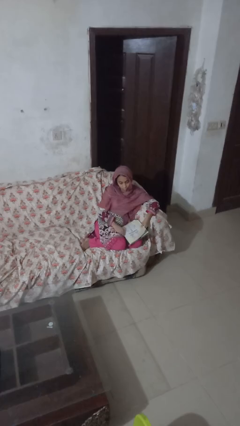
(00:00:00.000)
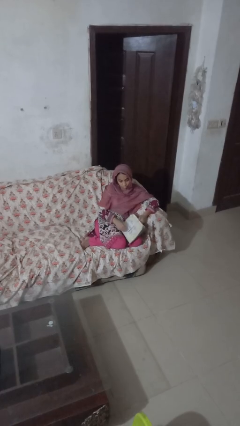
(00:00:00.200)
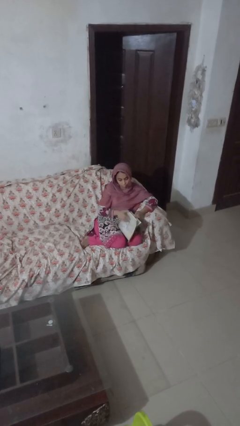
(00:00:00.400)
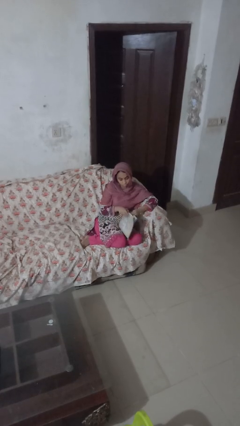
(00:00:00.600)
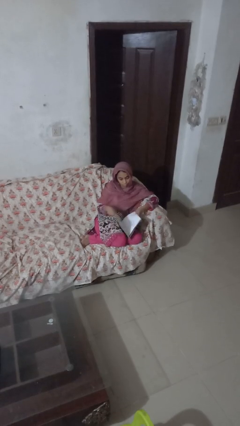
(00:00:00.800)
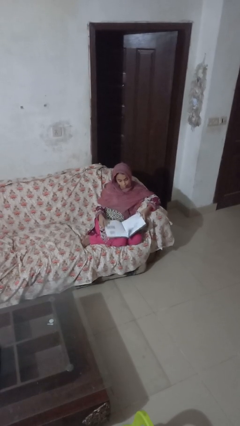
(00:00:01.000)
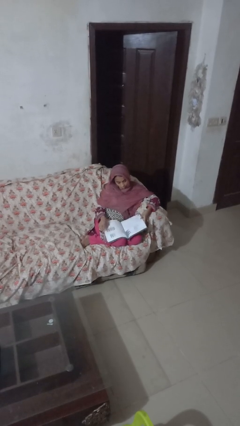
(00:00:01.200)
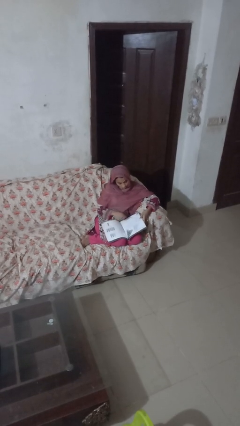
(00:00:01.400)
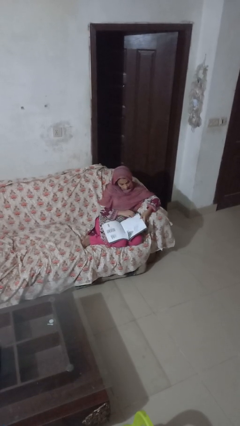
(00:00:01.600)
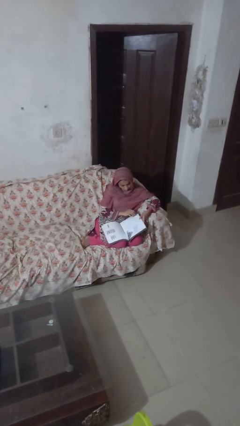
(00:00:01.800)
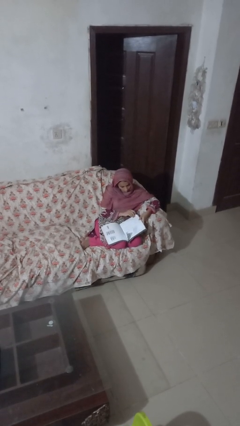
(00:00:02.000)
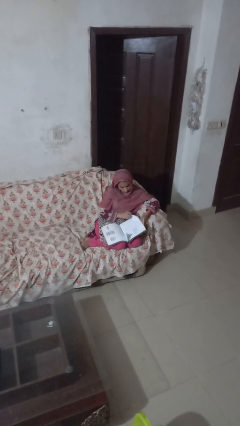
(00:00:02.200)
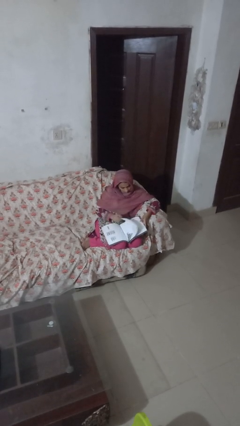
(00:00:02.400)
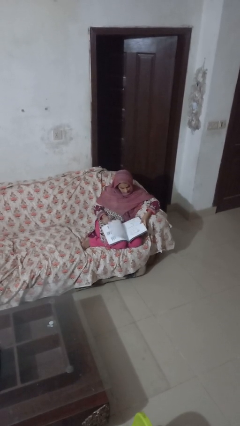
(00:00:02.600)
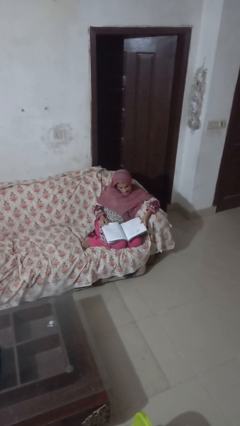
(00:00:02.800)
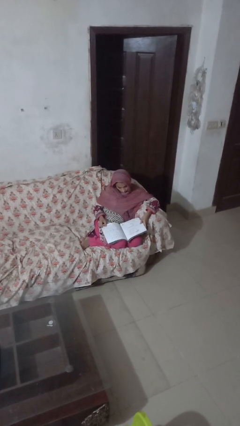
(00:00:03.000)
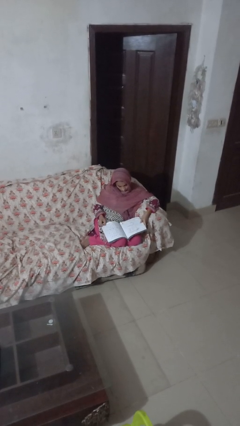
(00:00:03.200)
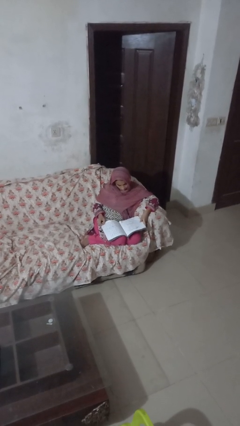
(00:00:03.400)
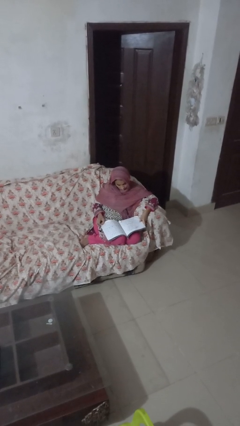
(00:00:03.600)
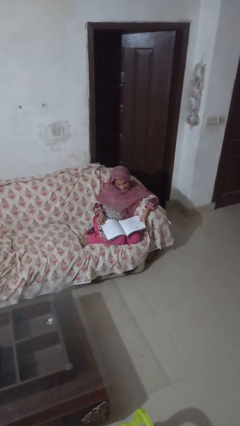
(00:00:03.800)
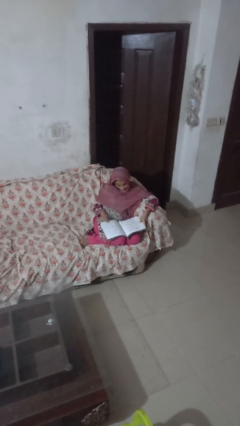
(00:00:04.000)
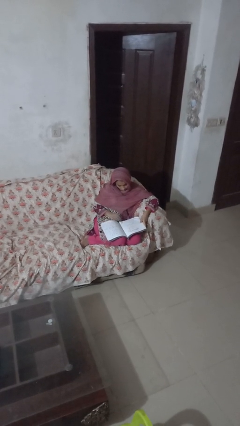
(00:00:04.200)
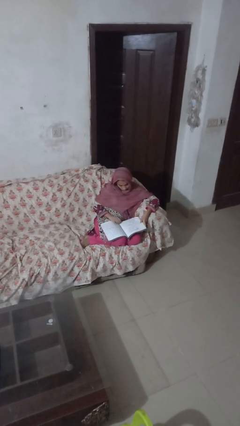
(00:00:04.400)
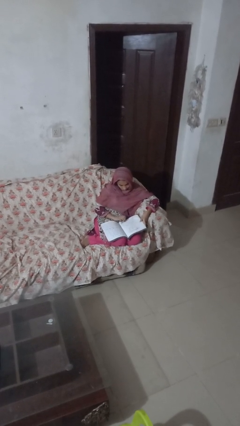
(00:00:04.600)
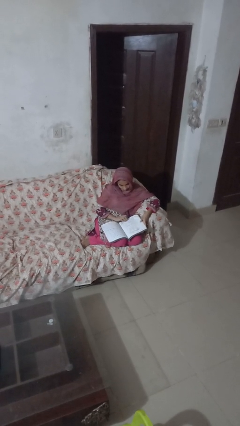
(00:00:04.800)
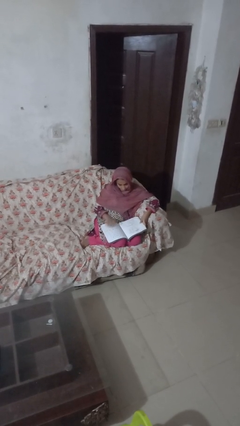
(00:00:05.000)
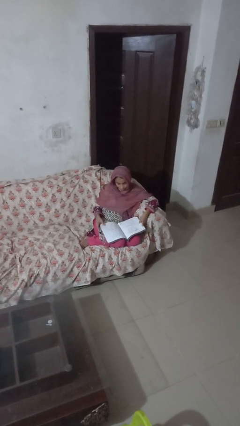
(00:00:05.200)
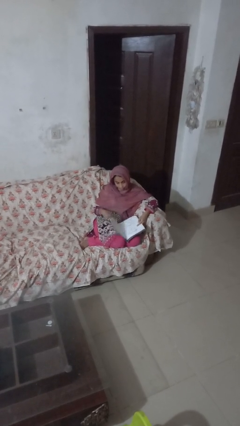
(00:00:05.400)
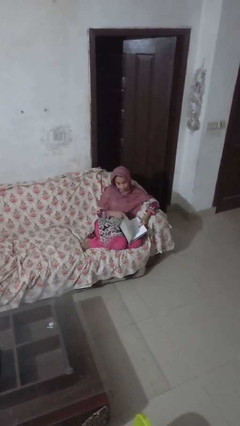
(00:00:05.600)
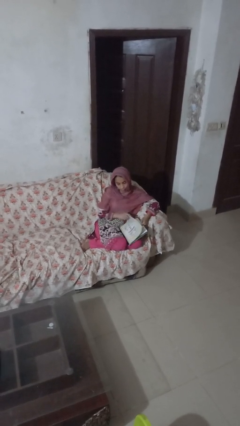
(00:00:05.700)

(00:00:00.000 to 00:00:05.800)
person reads book

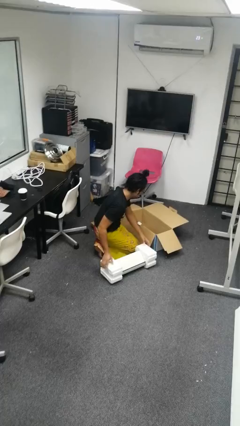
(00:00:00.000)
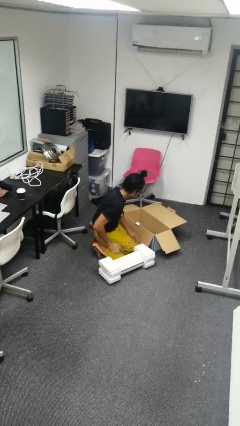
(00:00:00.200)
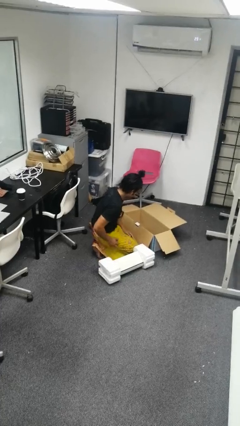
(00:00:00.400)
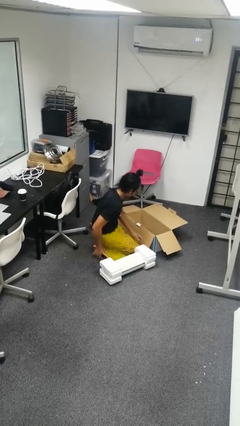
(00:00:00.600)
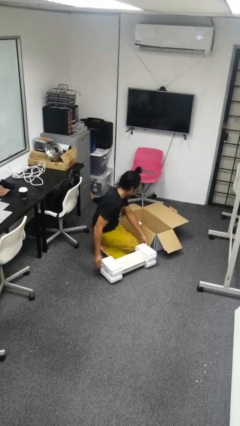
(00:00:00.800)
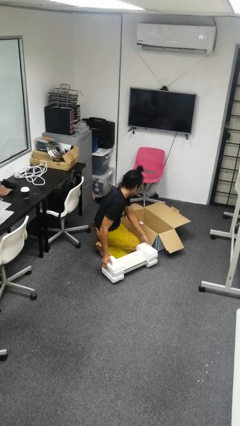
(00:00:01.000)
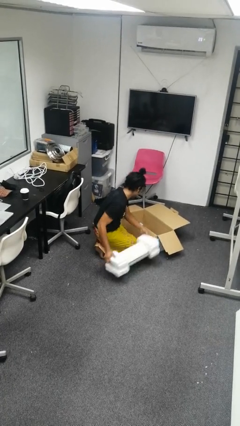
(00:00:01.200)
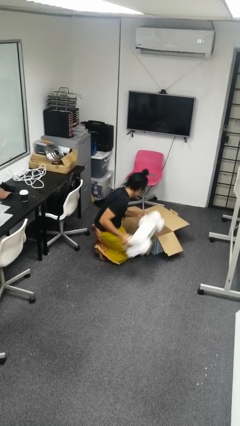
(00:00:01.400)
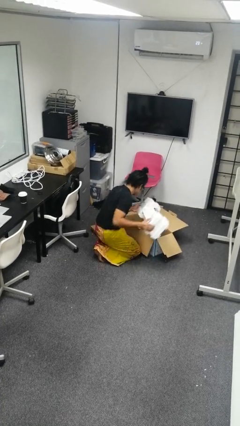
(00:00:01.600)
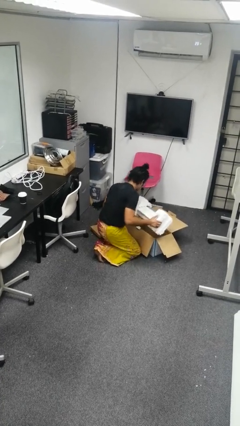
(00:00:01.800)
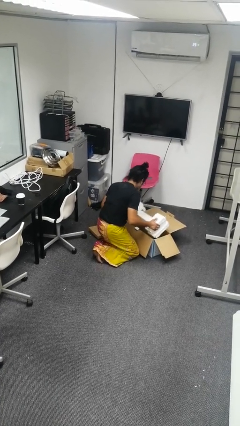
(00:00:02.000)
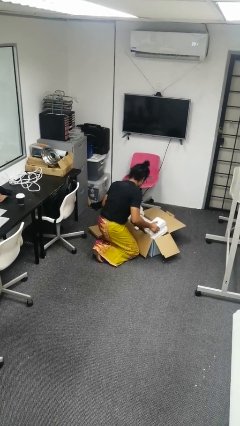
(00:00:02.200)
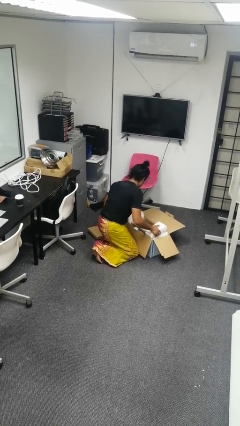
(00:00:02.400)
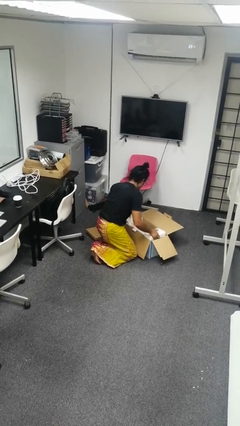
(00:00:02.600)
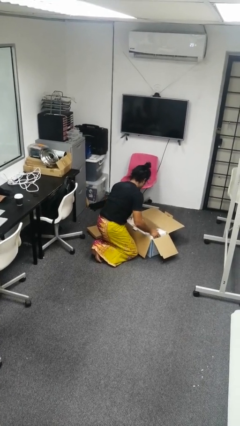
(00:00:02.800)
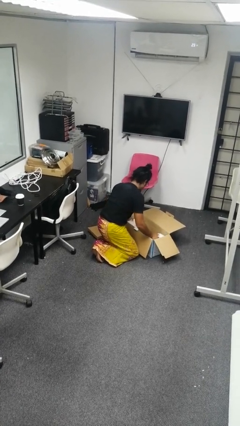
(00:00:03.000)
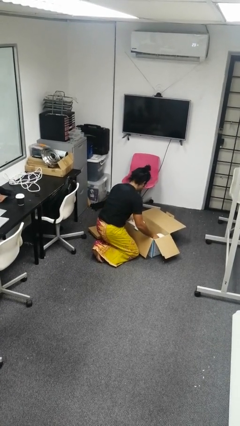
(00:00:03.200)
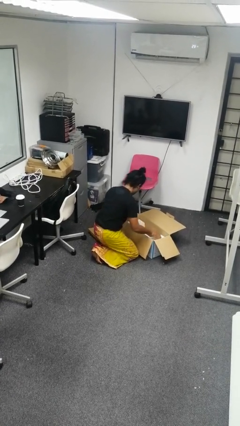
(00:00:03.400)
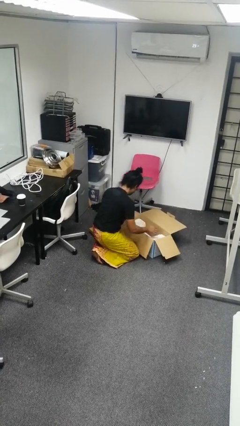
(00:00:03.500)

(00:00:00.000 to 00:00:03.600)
person puts object into box

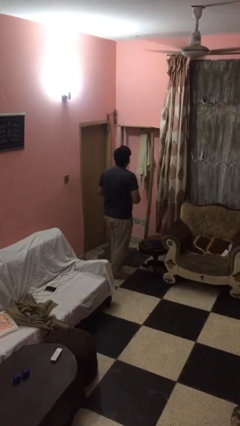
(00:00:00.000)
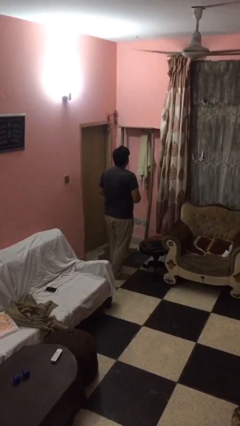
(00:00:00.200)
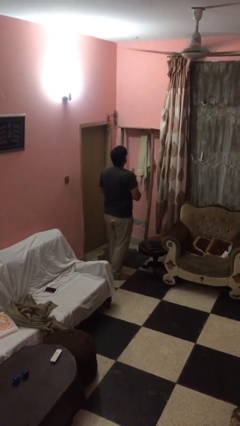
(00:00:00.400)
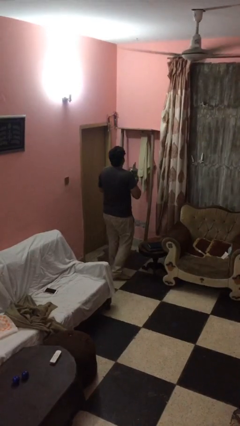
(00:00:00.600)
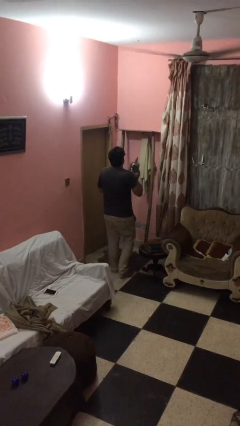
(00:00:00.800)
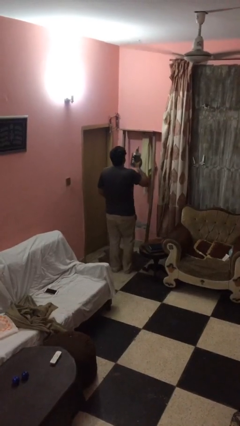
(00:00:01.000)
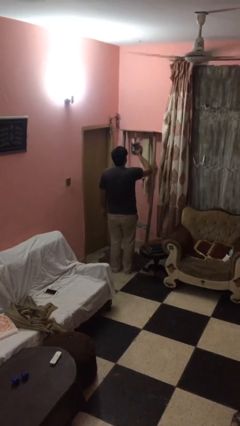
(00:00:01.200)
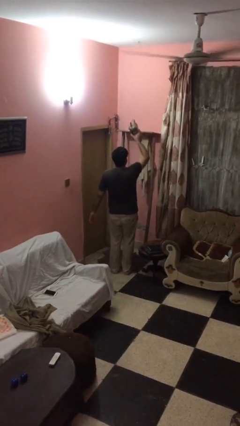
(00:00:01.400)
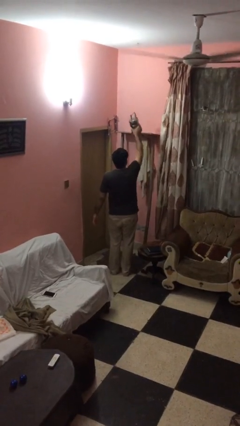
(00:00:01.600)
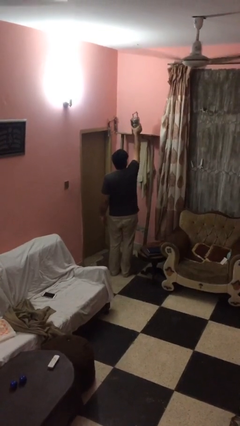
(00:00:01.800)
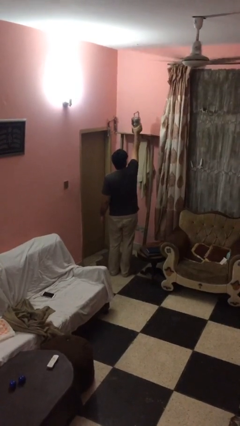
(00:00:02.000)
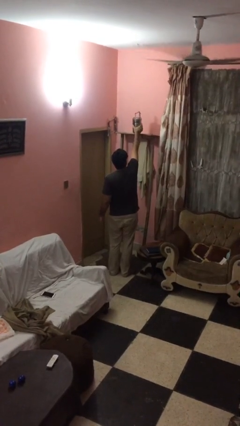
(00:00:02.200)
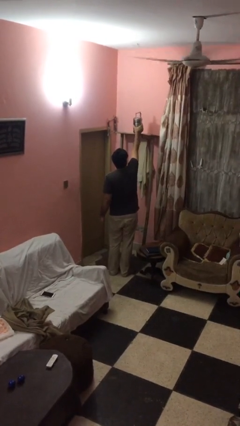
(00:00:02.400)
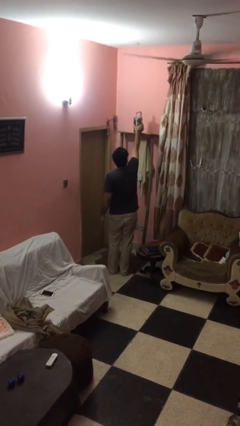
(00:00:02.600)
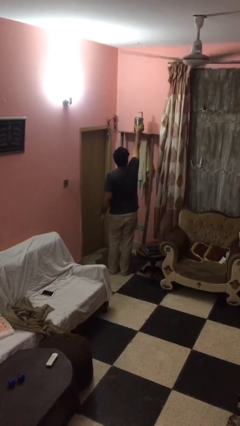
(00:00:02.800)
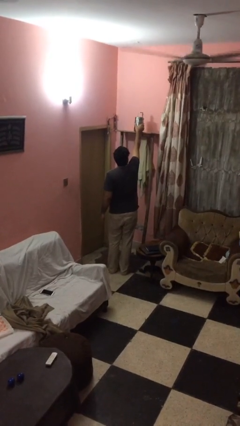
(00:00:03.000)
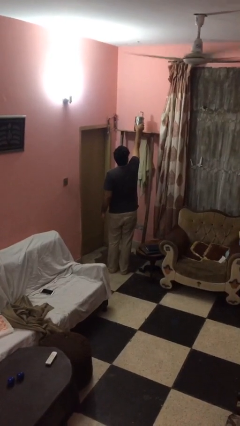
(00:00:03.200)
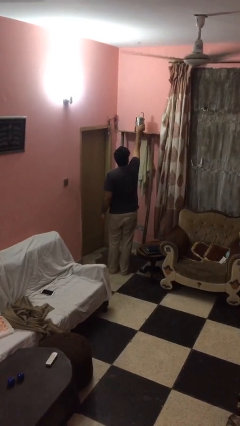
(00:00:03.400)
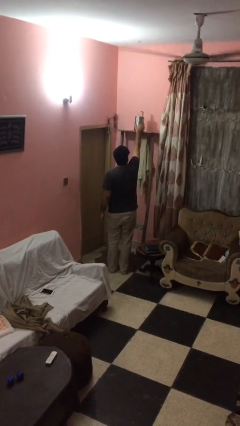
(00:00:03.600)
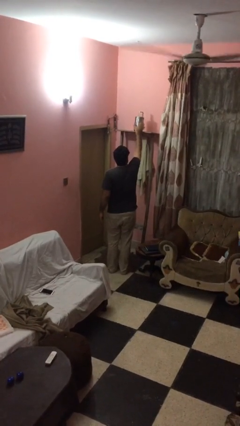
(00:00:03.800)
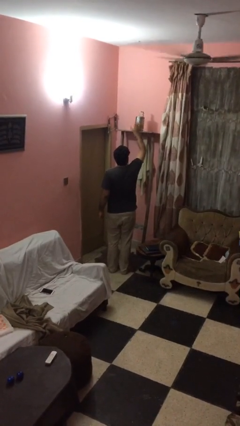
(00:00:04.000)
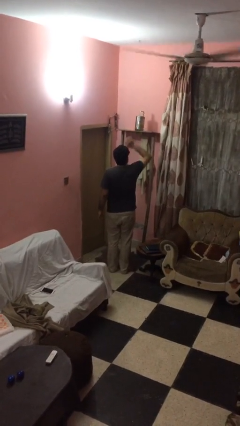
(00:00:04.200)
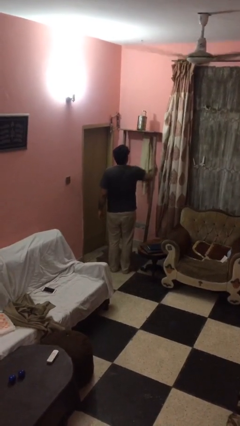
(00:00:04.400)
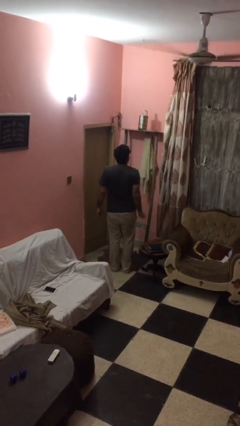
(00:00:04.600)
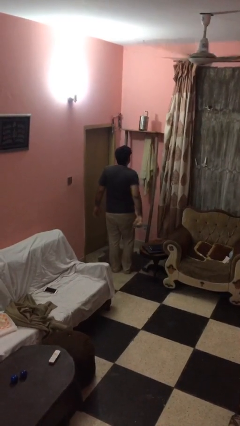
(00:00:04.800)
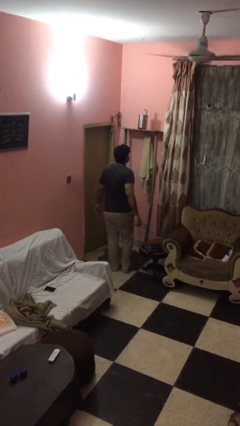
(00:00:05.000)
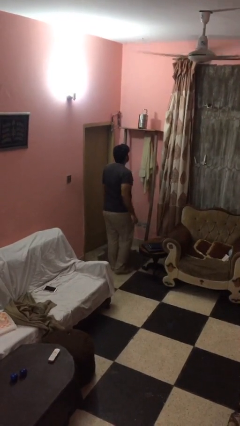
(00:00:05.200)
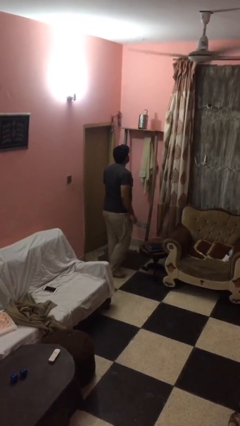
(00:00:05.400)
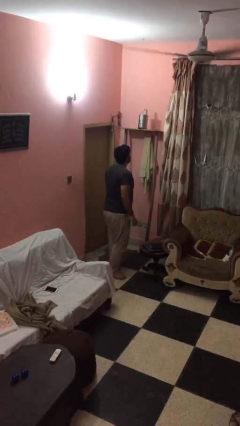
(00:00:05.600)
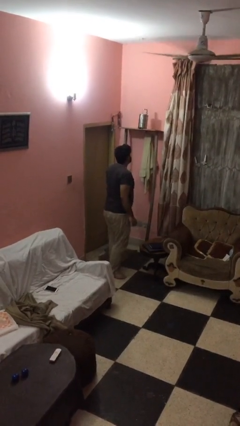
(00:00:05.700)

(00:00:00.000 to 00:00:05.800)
person puts down object on shelf

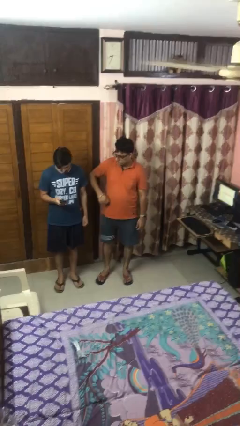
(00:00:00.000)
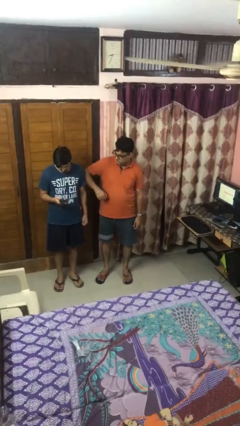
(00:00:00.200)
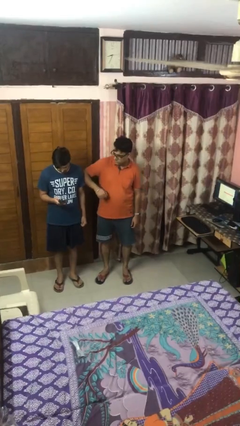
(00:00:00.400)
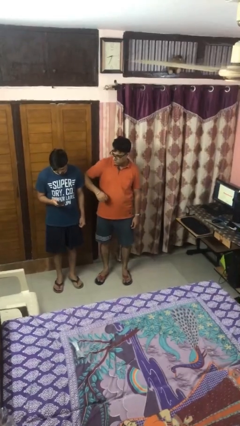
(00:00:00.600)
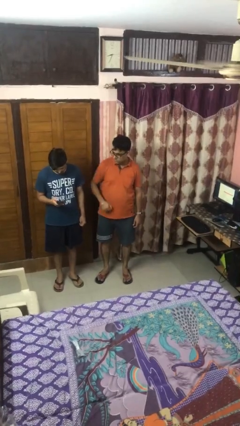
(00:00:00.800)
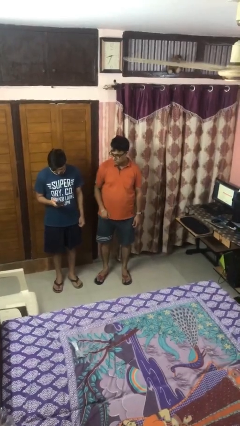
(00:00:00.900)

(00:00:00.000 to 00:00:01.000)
person nudges person with elbow

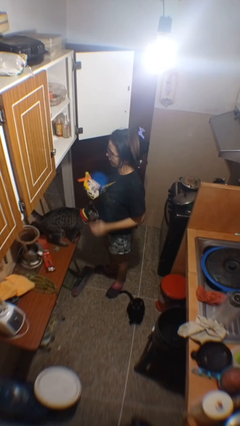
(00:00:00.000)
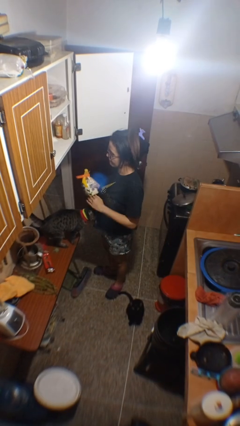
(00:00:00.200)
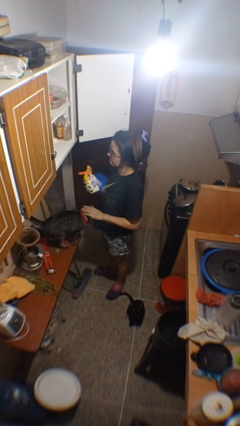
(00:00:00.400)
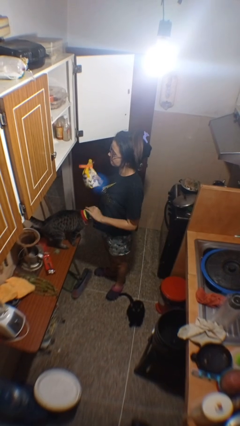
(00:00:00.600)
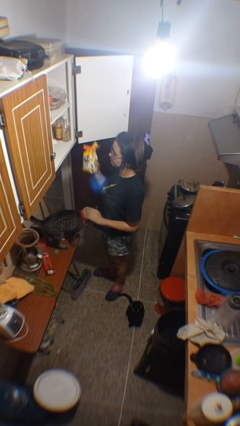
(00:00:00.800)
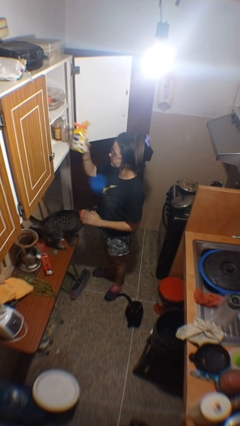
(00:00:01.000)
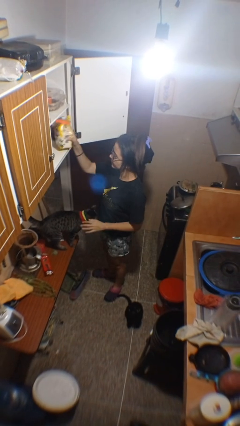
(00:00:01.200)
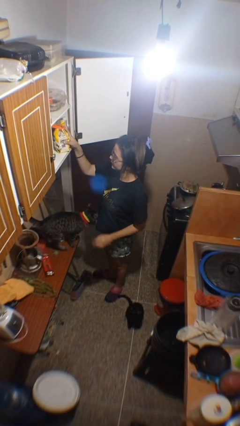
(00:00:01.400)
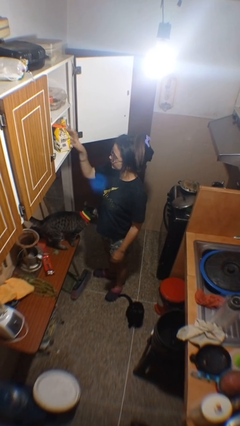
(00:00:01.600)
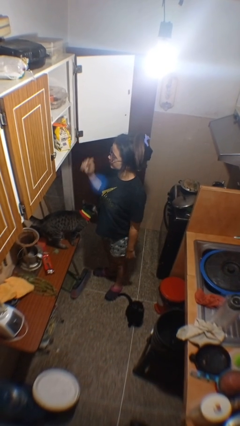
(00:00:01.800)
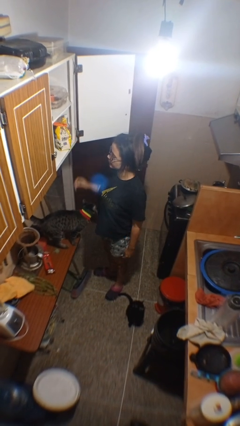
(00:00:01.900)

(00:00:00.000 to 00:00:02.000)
person puts down object into cabinet
